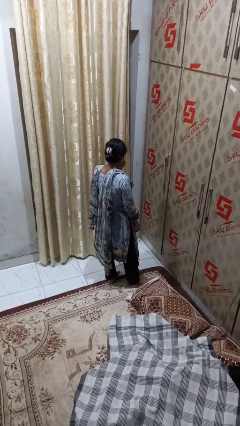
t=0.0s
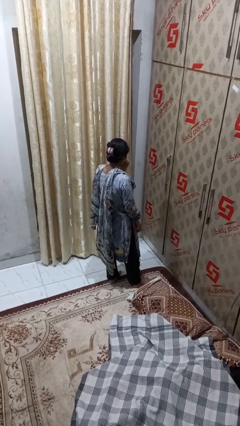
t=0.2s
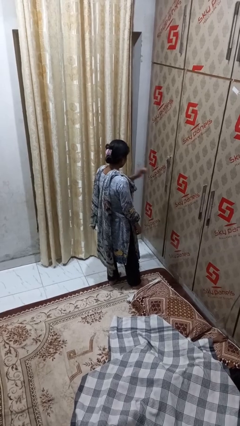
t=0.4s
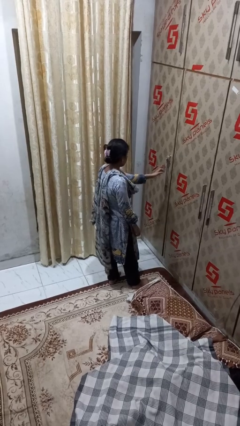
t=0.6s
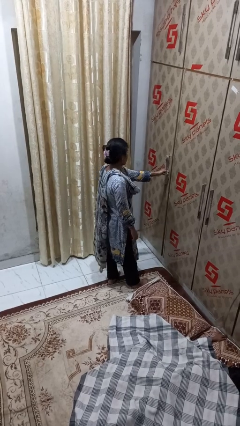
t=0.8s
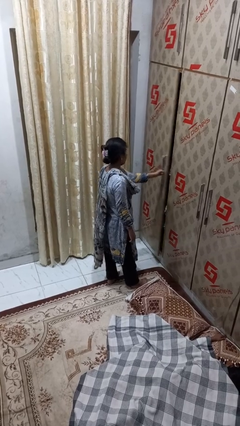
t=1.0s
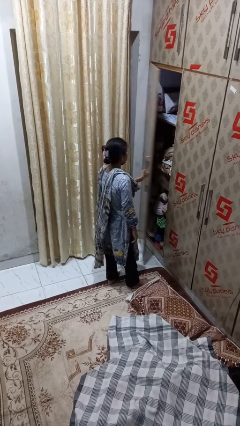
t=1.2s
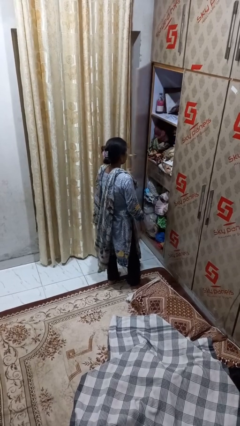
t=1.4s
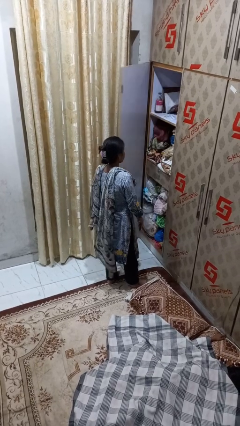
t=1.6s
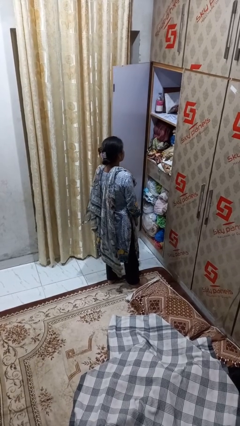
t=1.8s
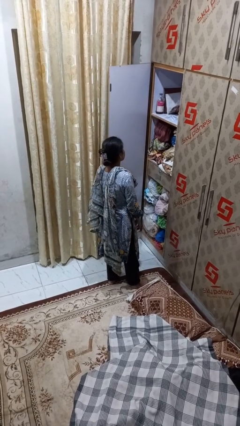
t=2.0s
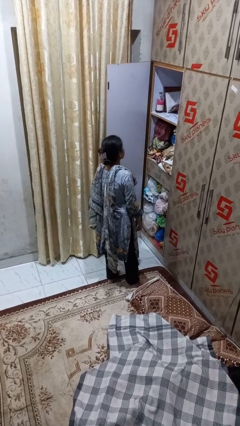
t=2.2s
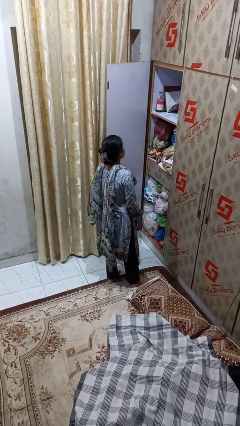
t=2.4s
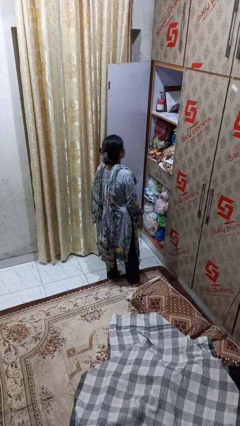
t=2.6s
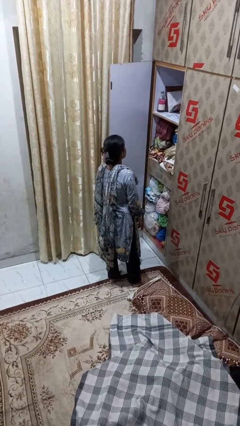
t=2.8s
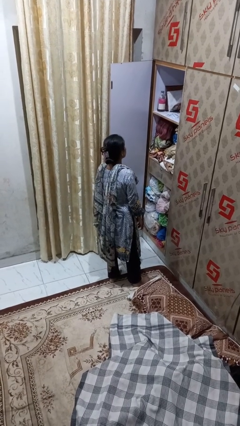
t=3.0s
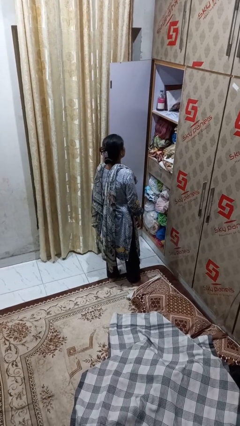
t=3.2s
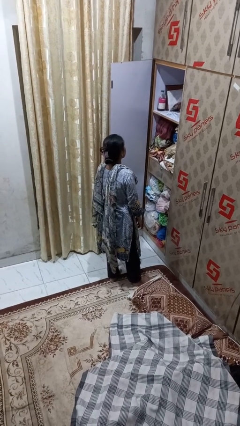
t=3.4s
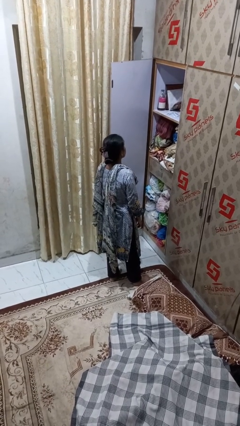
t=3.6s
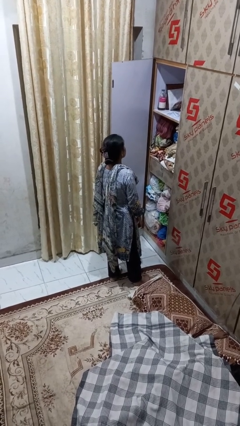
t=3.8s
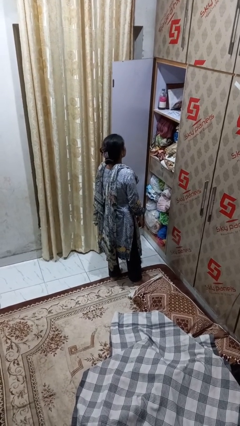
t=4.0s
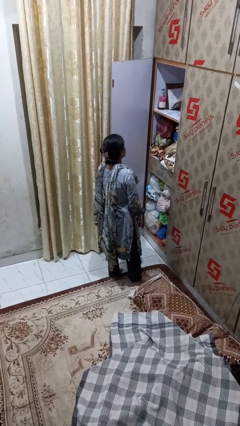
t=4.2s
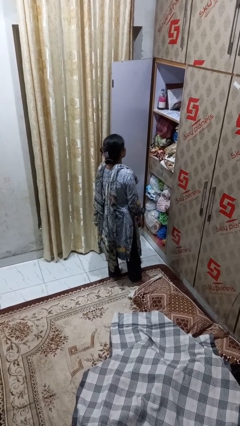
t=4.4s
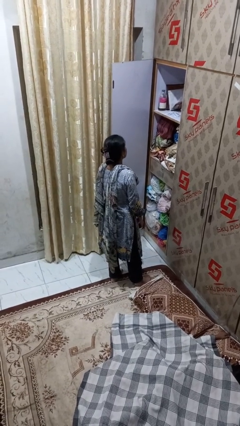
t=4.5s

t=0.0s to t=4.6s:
person opens closet door

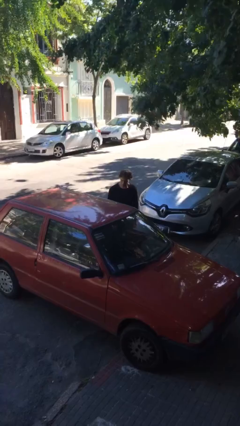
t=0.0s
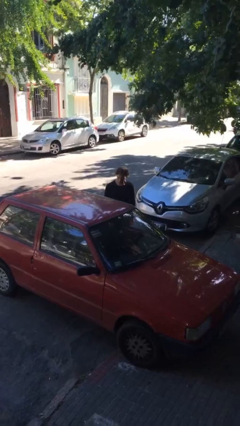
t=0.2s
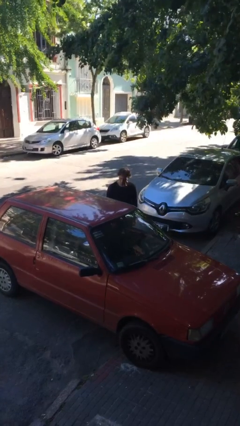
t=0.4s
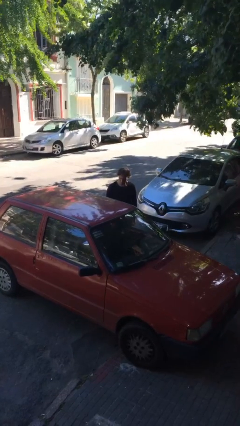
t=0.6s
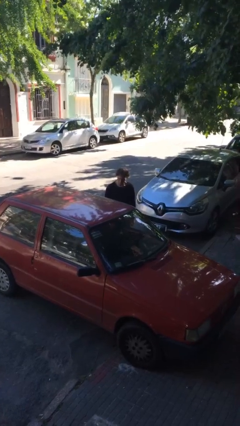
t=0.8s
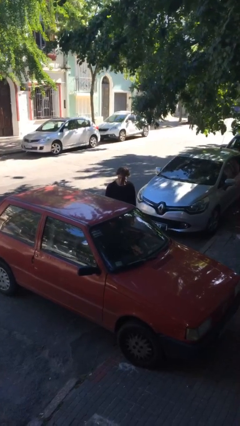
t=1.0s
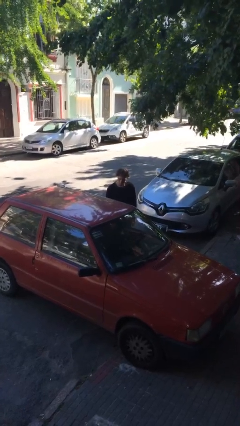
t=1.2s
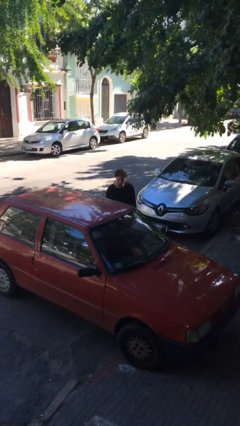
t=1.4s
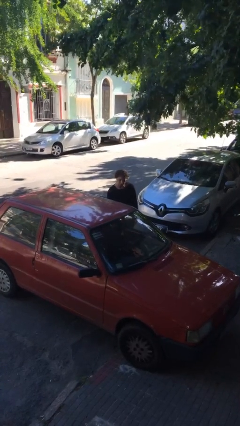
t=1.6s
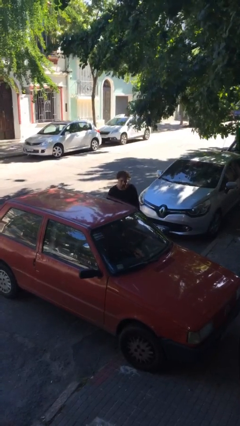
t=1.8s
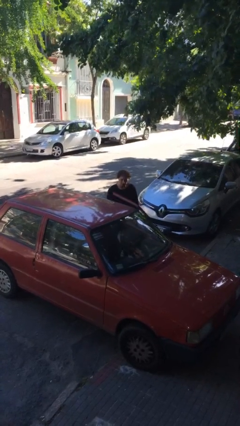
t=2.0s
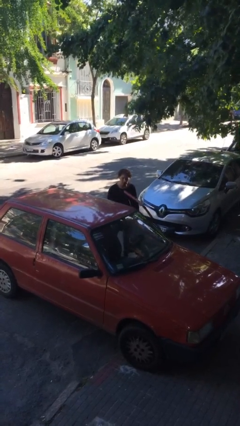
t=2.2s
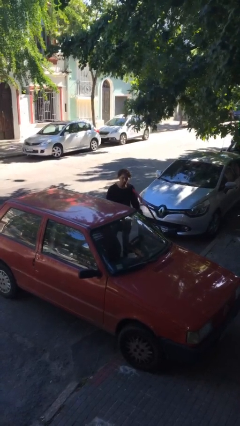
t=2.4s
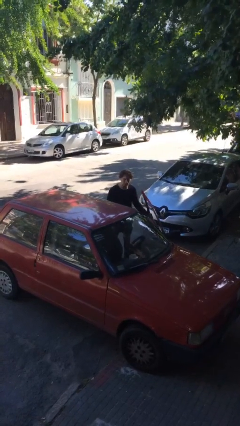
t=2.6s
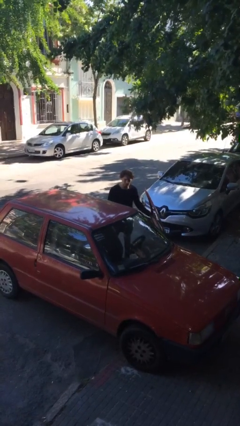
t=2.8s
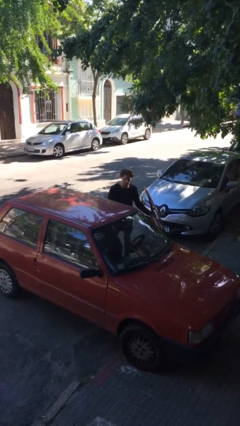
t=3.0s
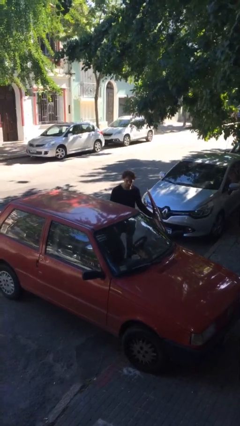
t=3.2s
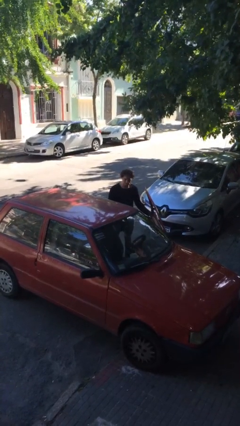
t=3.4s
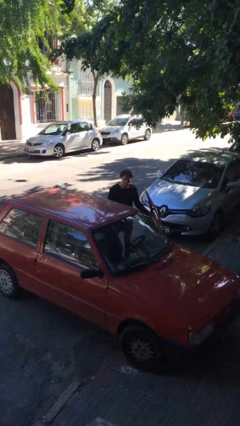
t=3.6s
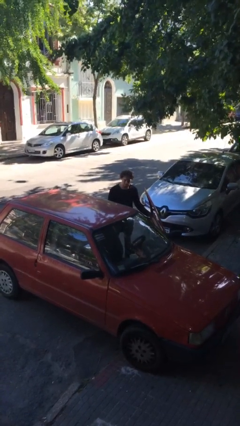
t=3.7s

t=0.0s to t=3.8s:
person opens car door

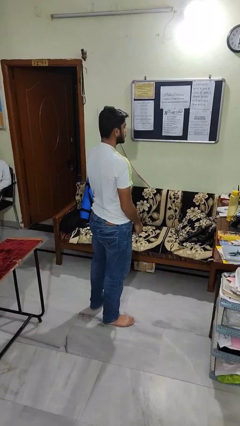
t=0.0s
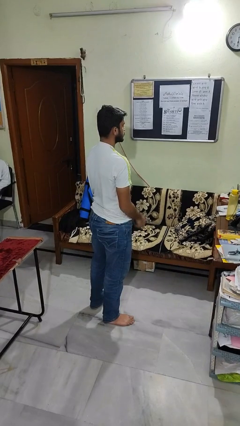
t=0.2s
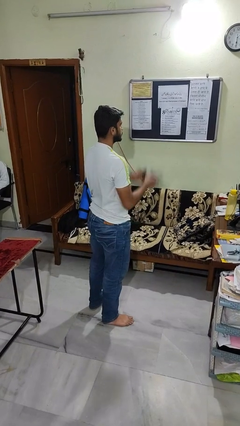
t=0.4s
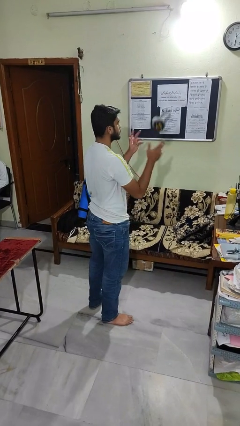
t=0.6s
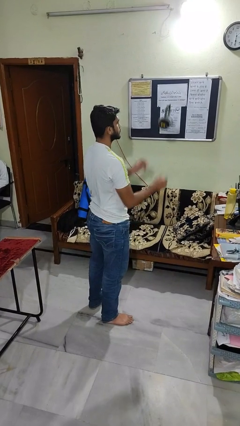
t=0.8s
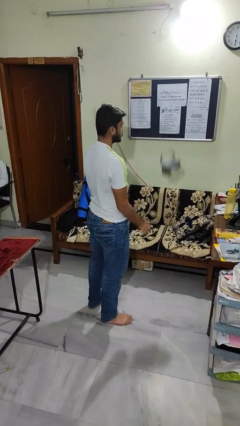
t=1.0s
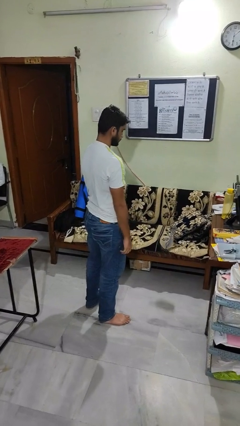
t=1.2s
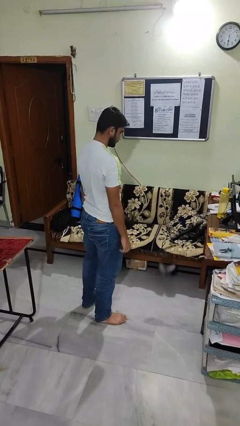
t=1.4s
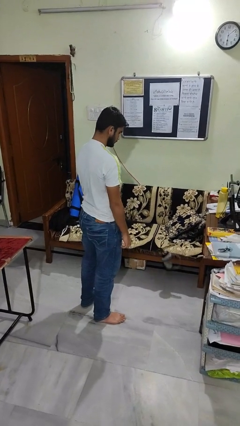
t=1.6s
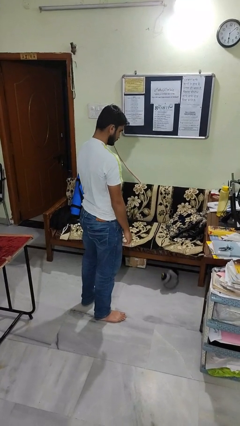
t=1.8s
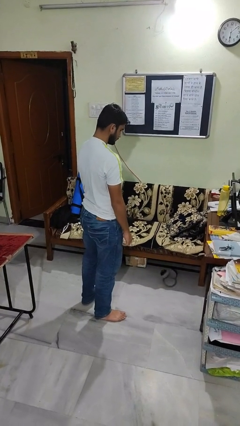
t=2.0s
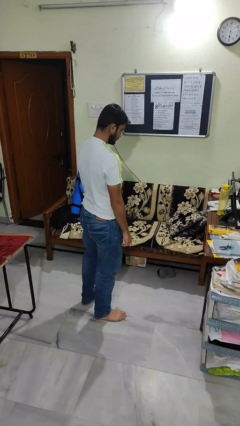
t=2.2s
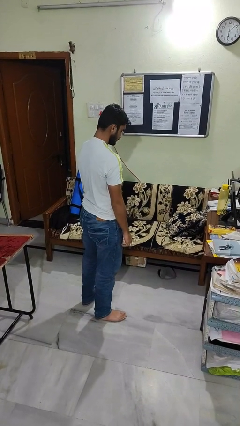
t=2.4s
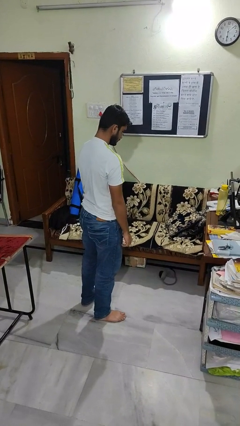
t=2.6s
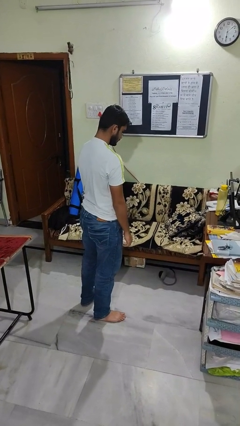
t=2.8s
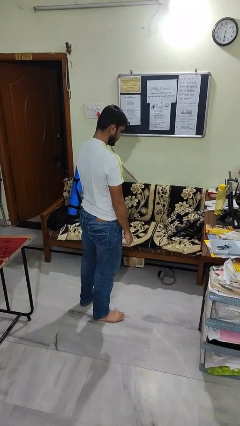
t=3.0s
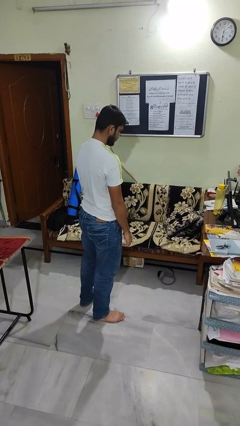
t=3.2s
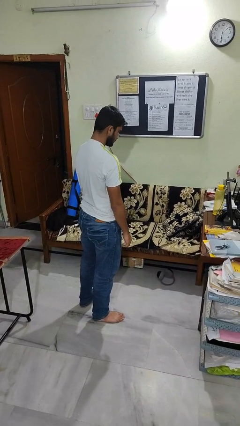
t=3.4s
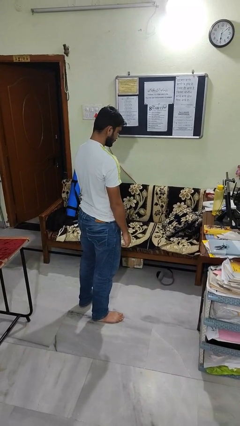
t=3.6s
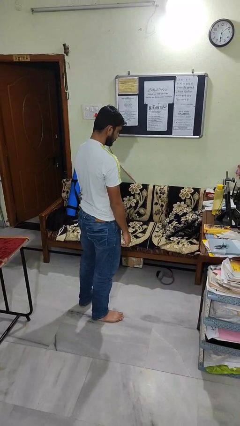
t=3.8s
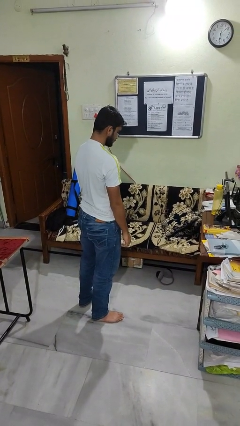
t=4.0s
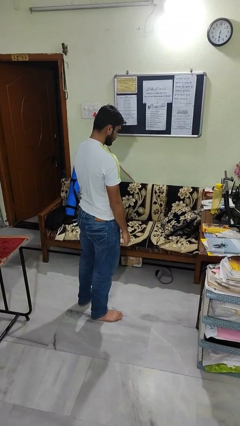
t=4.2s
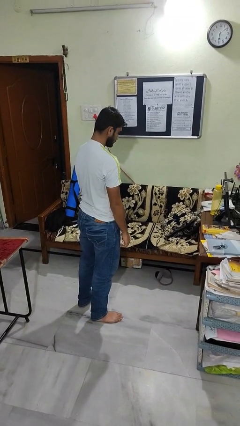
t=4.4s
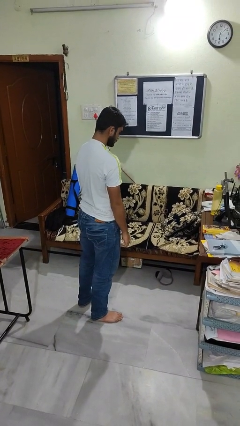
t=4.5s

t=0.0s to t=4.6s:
person throws object into air

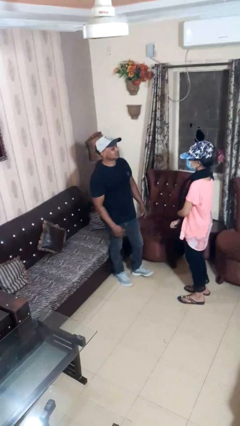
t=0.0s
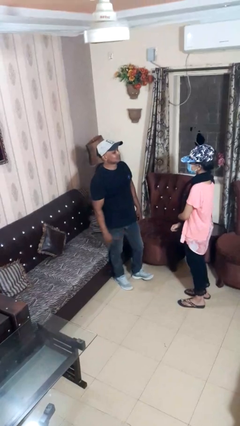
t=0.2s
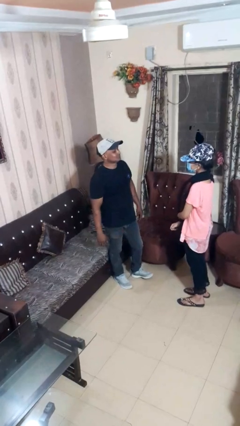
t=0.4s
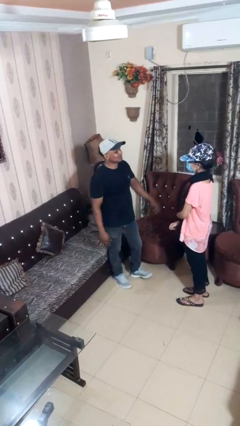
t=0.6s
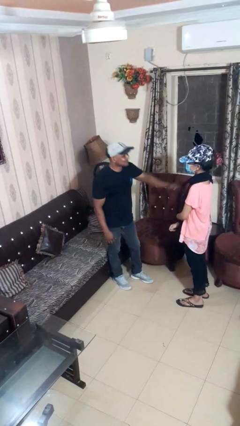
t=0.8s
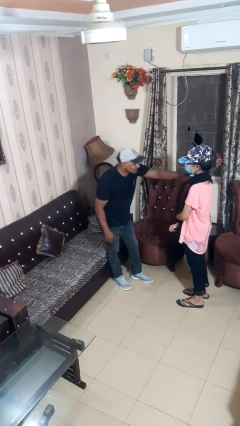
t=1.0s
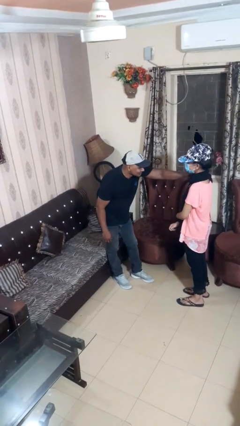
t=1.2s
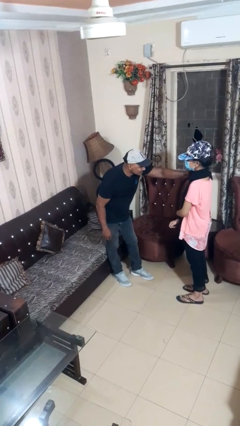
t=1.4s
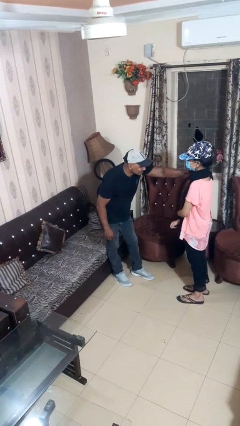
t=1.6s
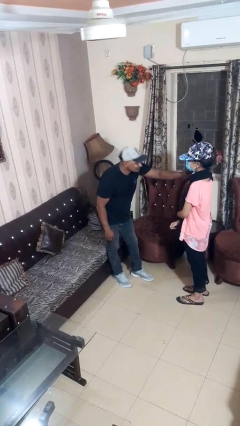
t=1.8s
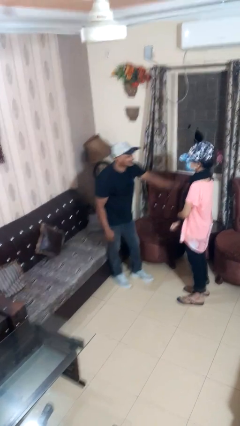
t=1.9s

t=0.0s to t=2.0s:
person pounds shoulders of person

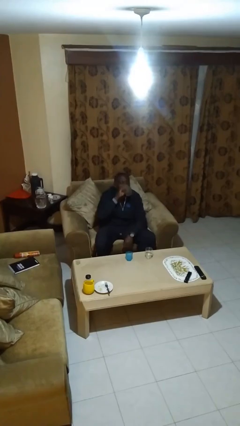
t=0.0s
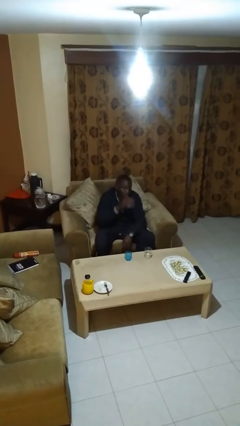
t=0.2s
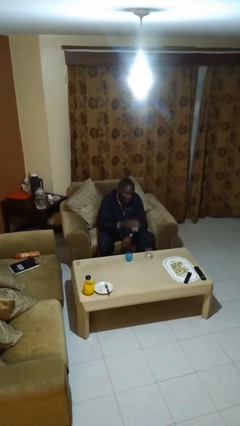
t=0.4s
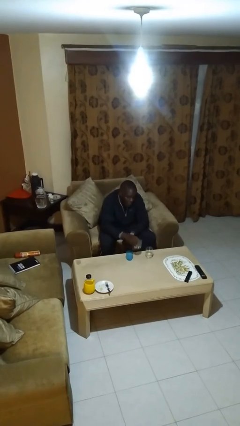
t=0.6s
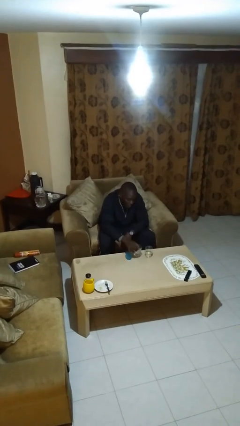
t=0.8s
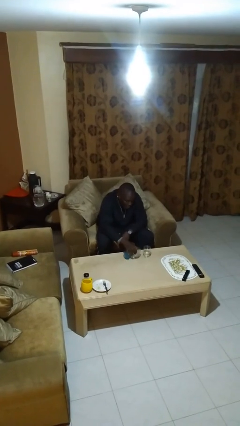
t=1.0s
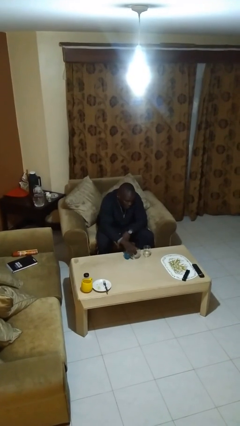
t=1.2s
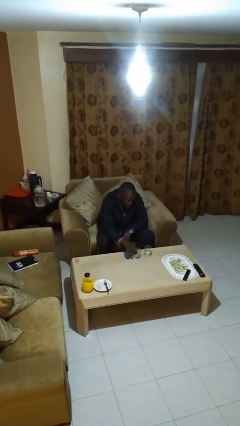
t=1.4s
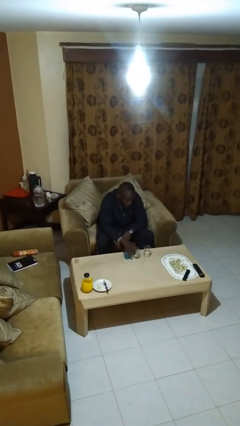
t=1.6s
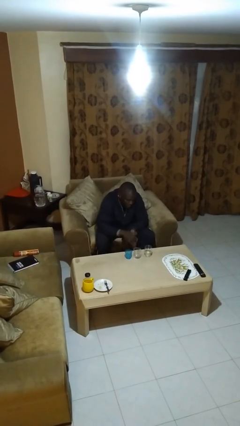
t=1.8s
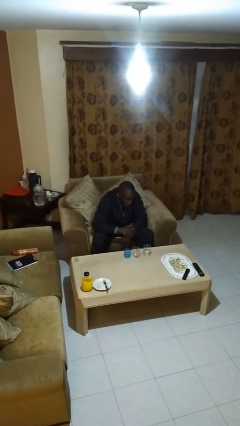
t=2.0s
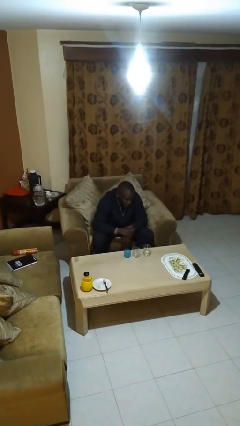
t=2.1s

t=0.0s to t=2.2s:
person puts down object on table

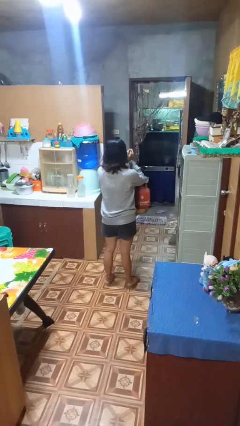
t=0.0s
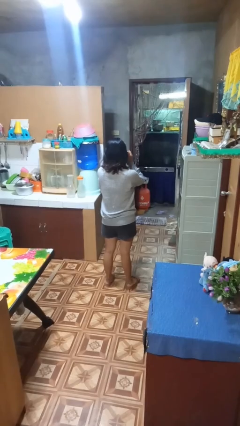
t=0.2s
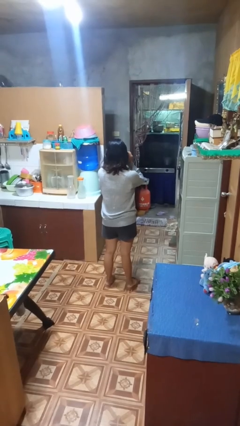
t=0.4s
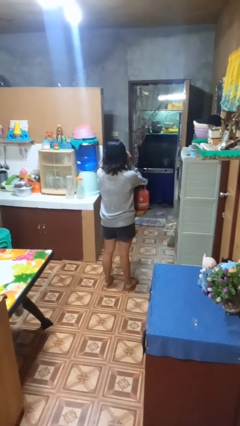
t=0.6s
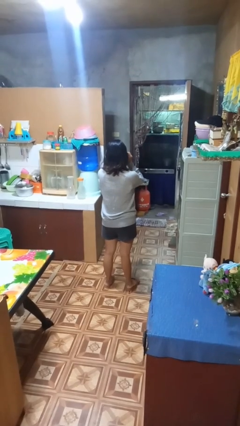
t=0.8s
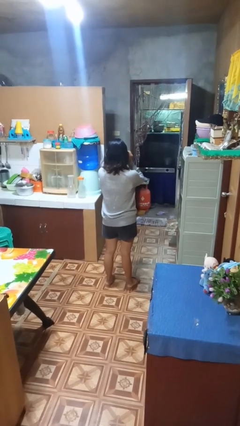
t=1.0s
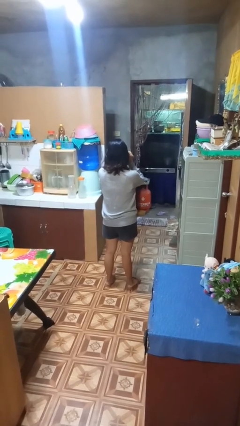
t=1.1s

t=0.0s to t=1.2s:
person drinks from mug
